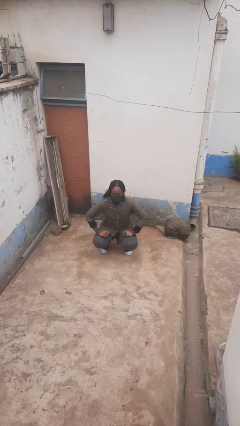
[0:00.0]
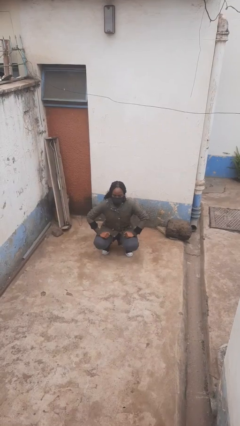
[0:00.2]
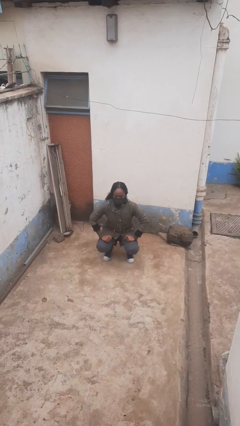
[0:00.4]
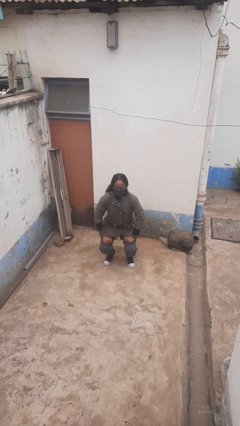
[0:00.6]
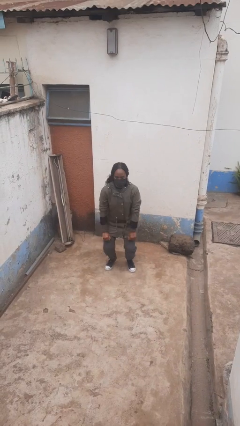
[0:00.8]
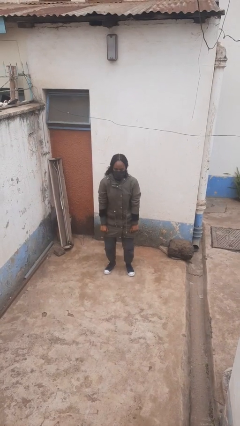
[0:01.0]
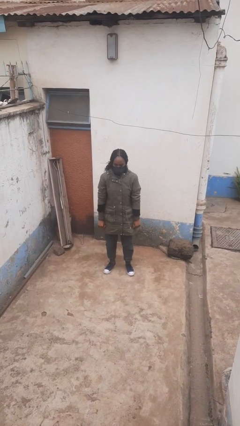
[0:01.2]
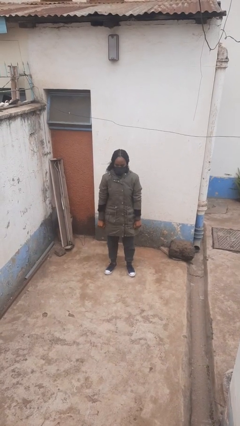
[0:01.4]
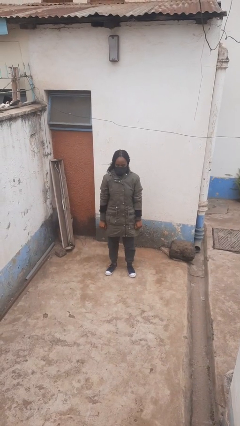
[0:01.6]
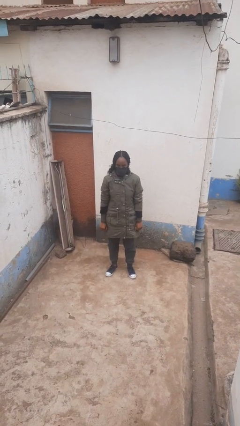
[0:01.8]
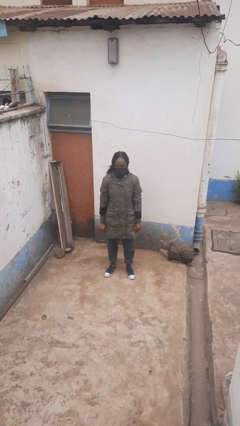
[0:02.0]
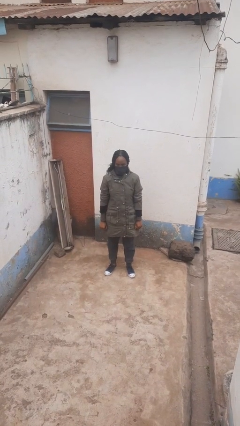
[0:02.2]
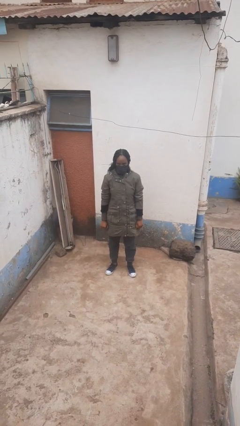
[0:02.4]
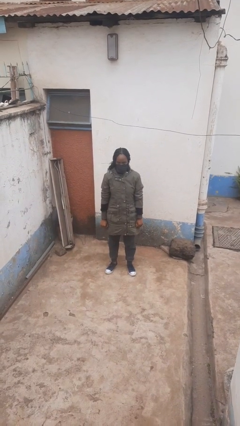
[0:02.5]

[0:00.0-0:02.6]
person stands up

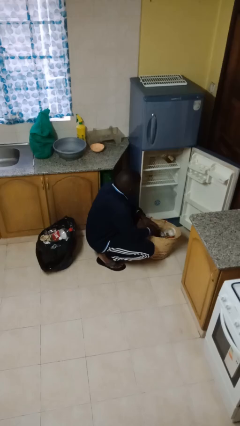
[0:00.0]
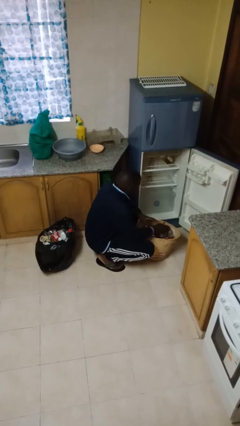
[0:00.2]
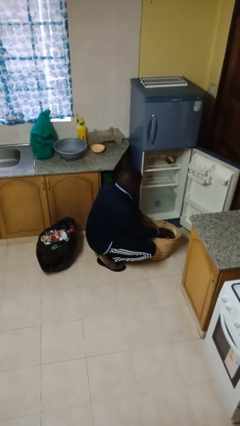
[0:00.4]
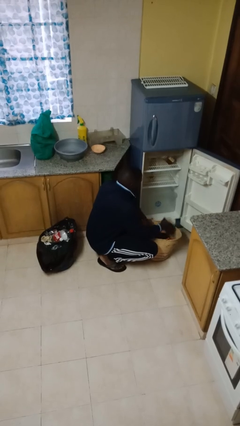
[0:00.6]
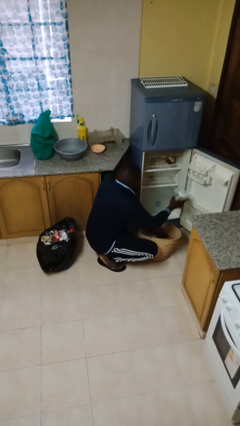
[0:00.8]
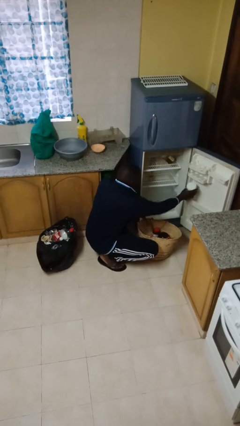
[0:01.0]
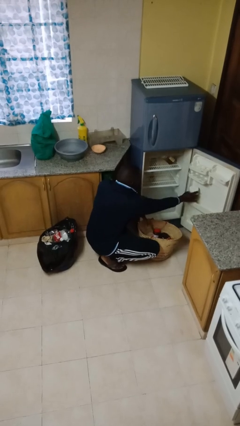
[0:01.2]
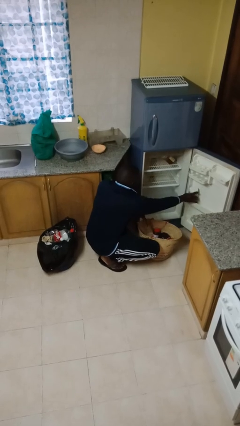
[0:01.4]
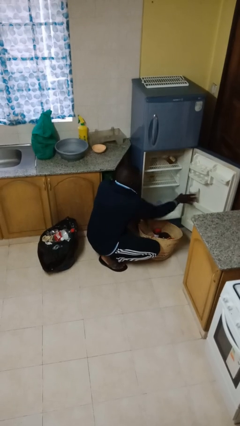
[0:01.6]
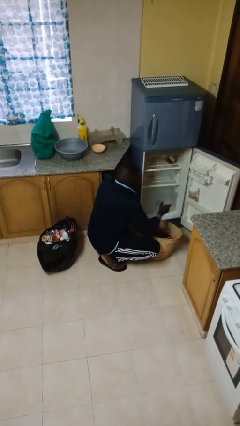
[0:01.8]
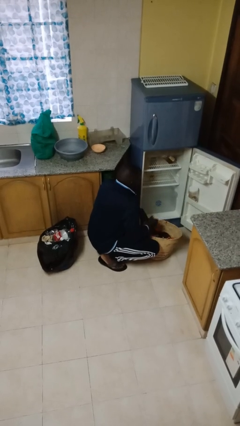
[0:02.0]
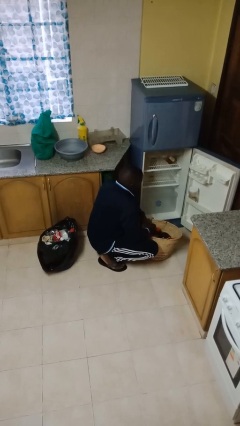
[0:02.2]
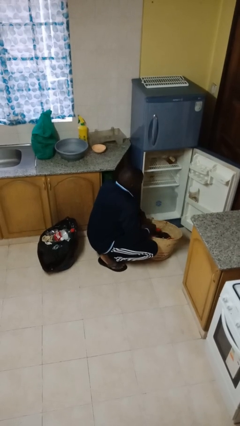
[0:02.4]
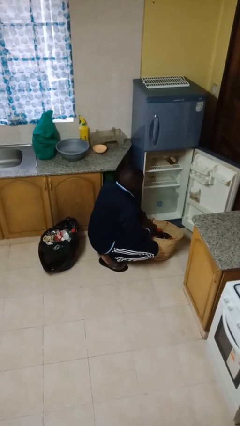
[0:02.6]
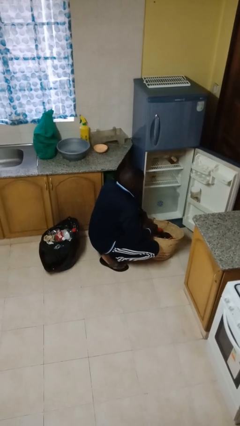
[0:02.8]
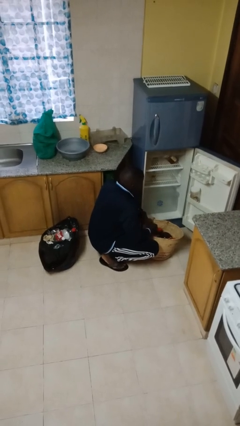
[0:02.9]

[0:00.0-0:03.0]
person loads groceries into refrigerator

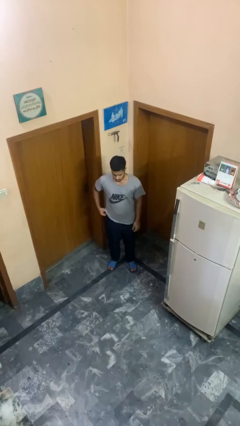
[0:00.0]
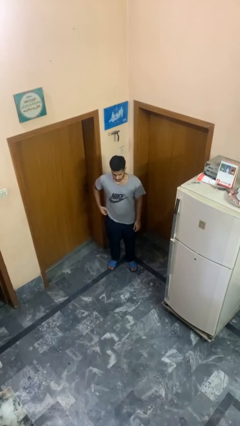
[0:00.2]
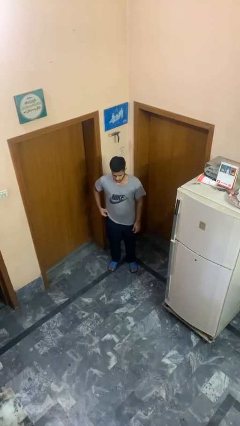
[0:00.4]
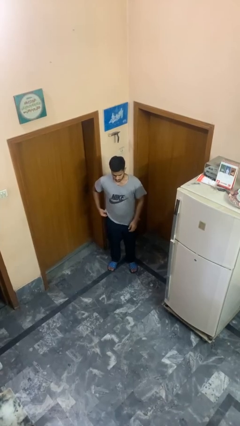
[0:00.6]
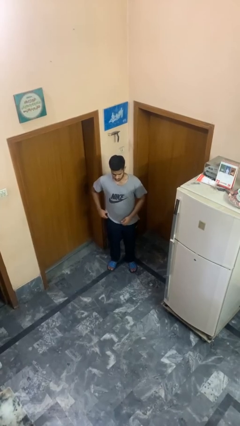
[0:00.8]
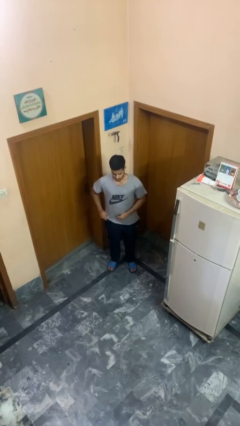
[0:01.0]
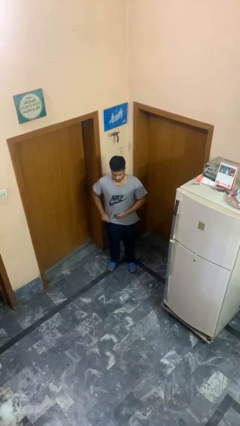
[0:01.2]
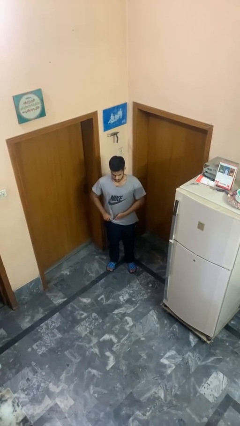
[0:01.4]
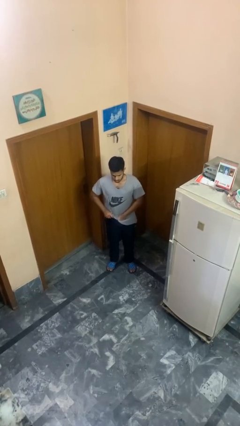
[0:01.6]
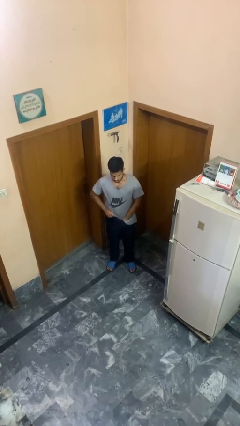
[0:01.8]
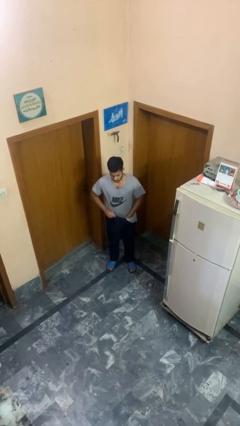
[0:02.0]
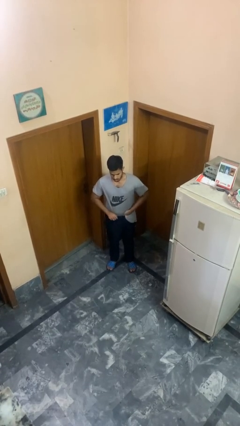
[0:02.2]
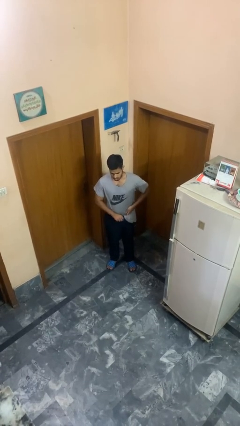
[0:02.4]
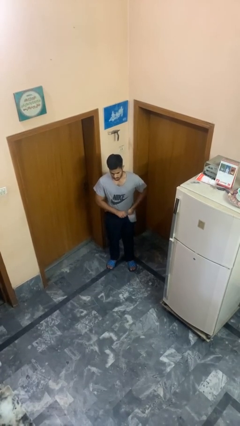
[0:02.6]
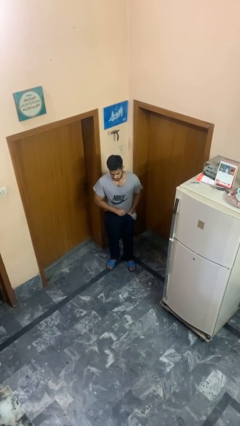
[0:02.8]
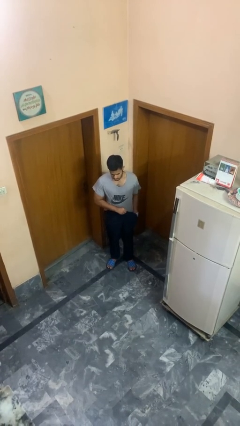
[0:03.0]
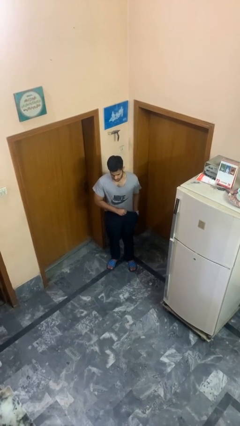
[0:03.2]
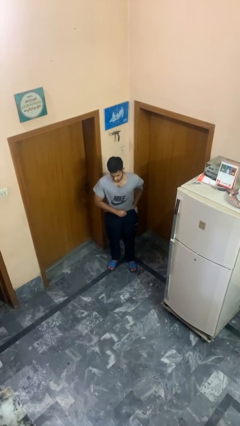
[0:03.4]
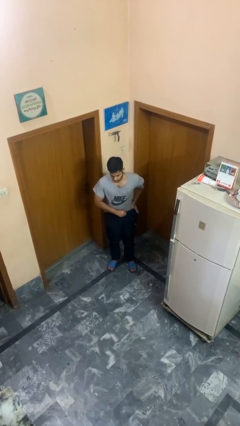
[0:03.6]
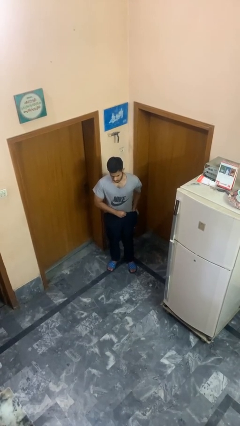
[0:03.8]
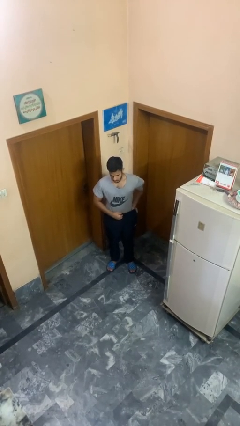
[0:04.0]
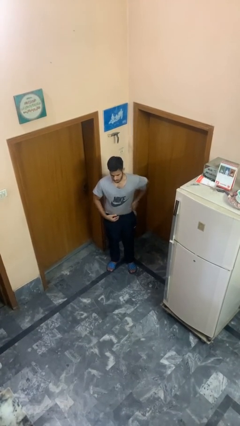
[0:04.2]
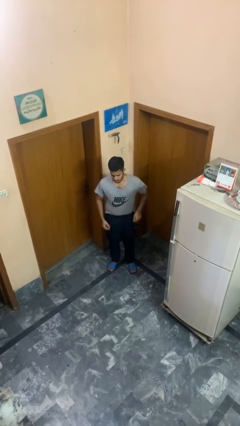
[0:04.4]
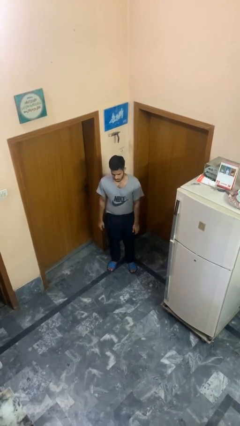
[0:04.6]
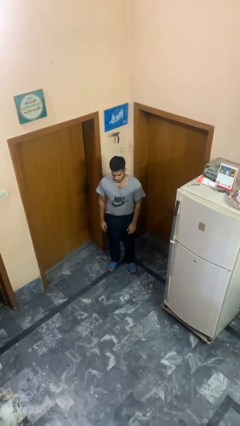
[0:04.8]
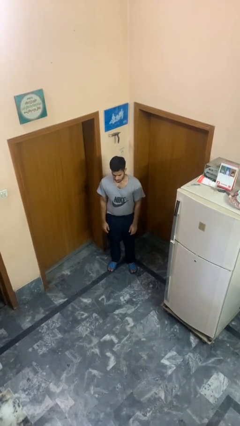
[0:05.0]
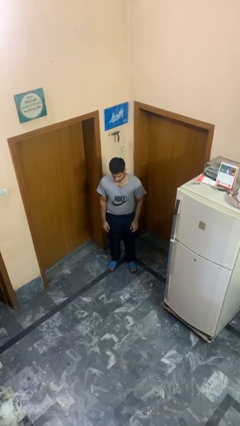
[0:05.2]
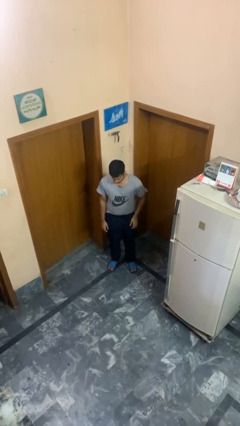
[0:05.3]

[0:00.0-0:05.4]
person tucks in shirt

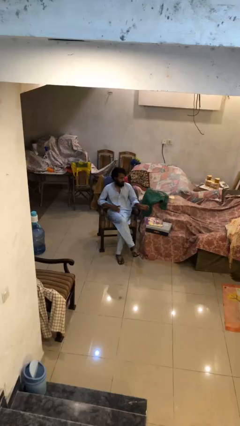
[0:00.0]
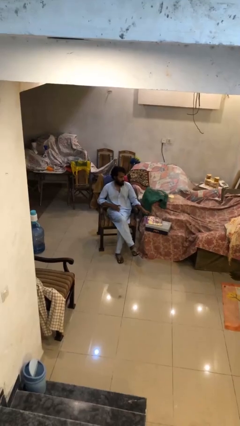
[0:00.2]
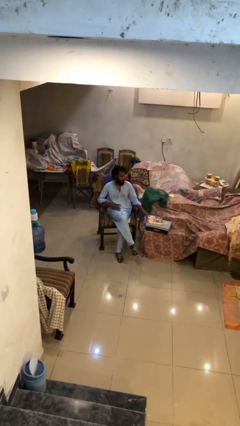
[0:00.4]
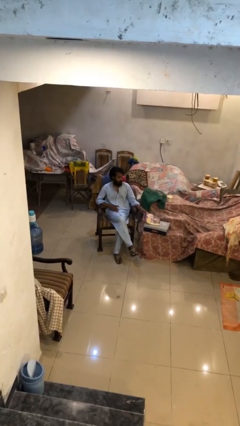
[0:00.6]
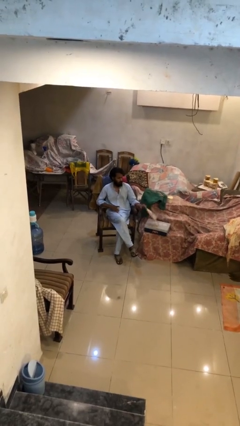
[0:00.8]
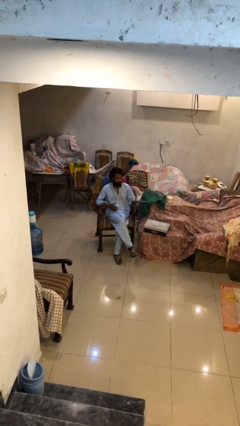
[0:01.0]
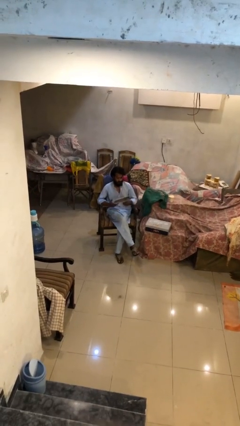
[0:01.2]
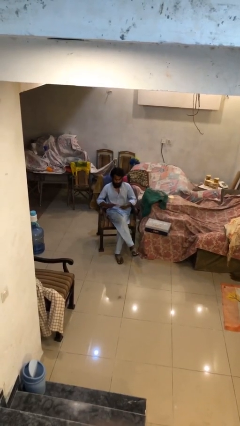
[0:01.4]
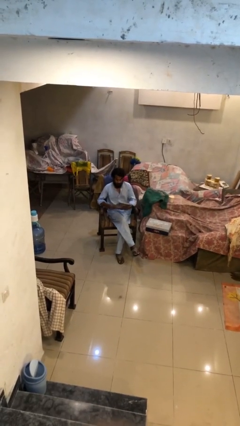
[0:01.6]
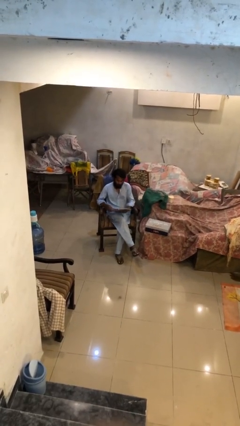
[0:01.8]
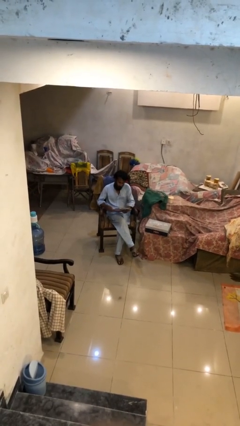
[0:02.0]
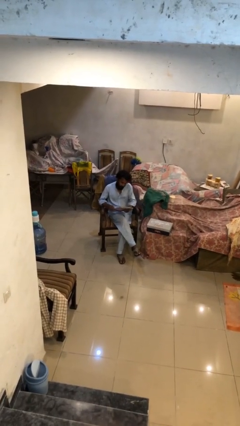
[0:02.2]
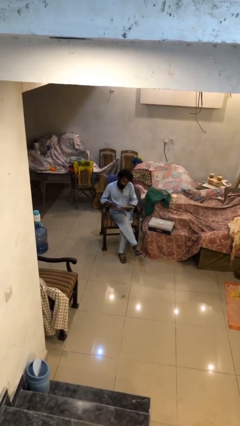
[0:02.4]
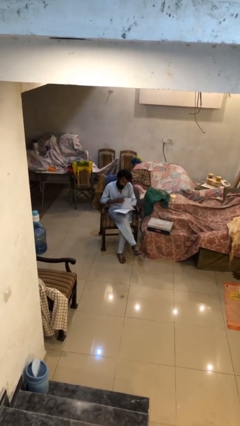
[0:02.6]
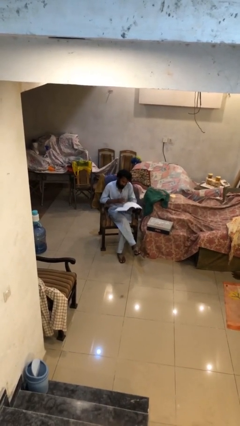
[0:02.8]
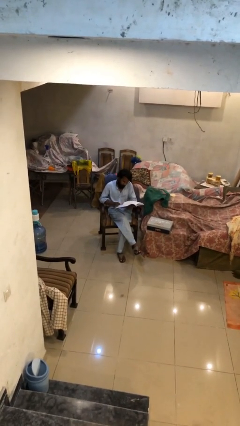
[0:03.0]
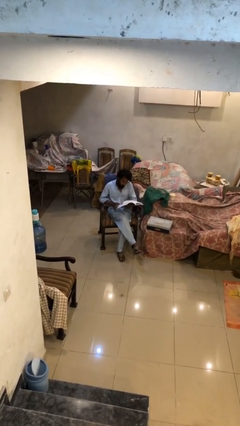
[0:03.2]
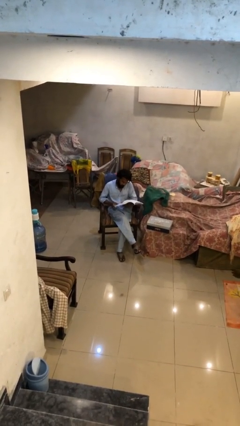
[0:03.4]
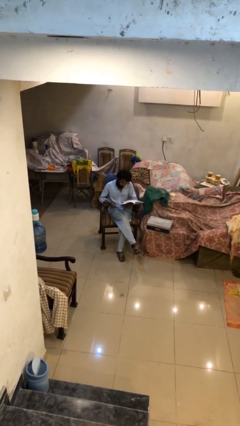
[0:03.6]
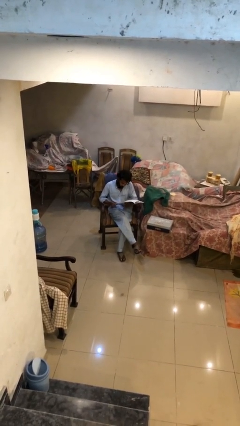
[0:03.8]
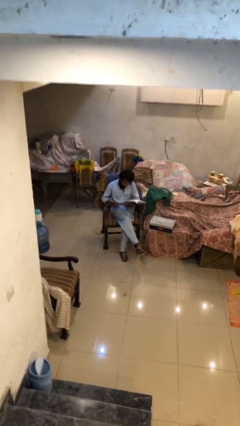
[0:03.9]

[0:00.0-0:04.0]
person picks up object from table

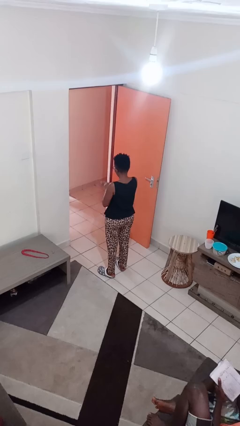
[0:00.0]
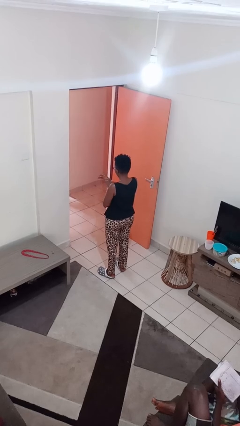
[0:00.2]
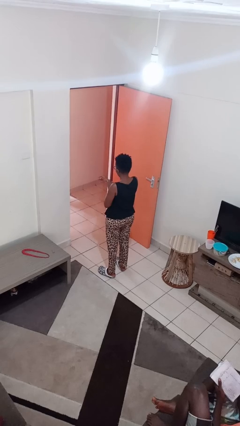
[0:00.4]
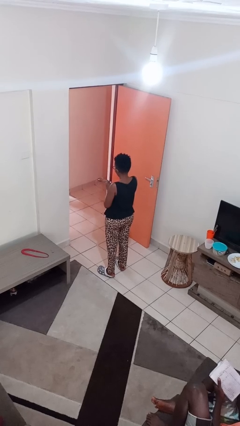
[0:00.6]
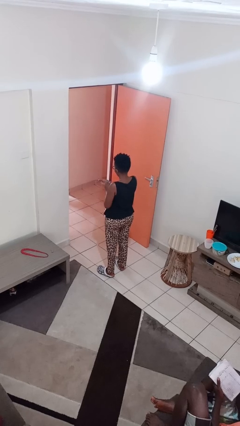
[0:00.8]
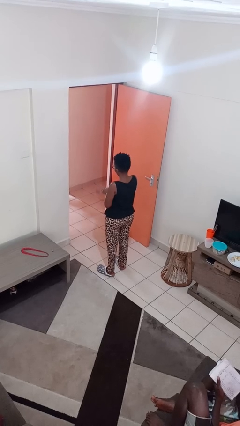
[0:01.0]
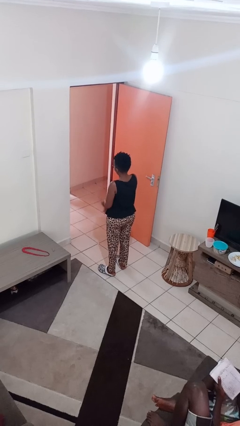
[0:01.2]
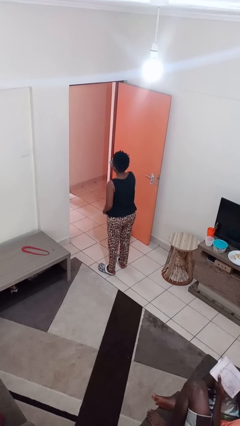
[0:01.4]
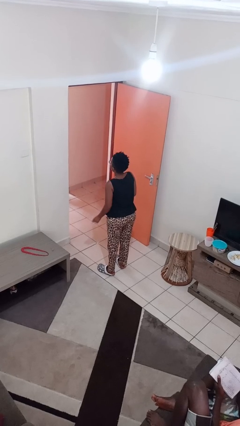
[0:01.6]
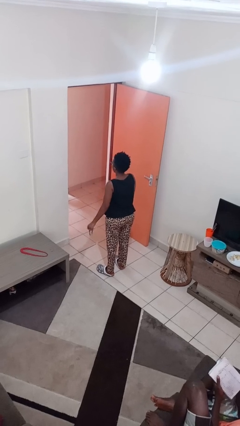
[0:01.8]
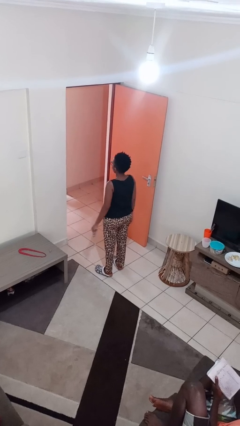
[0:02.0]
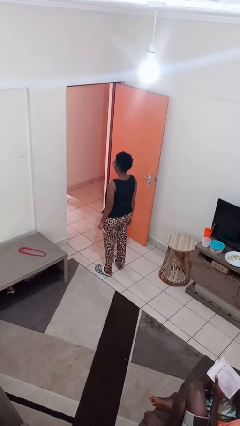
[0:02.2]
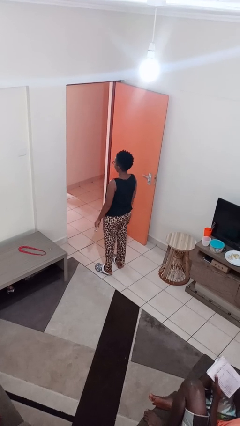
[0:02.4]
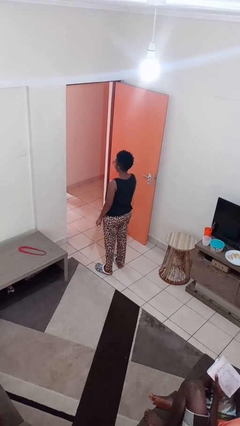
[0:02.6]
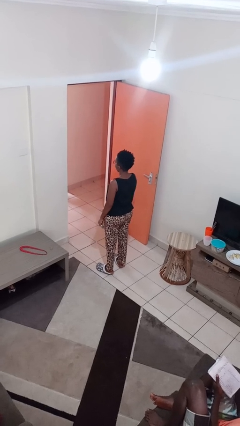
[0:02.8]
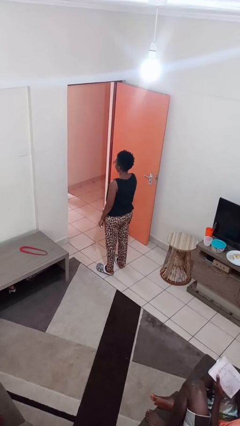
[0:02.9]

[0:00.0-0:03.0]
person takes off wristwatch
